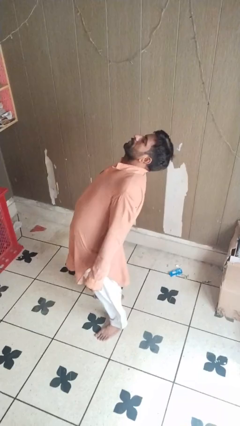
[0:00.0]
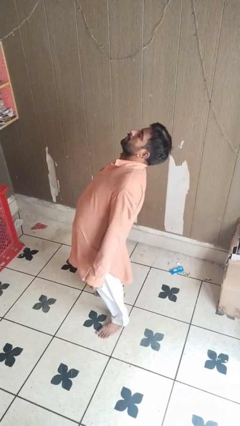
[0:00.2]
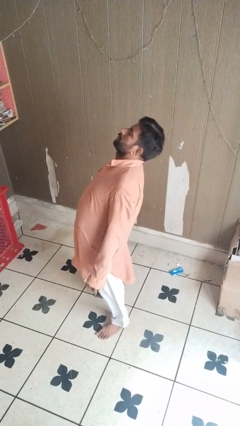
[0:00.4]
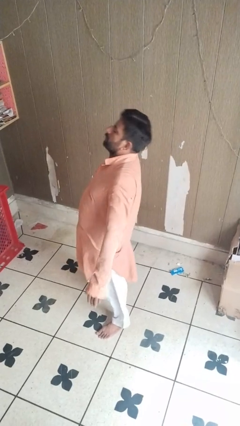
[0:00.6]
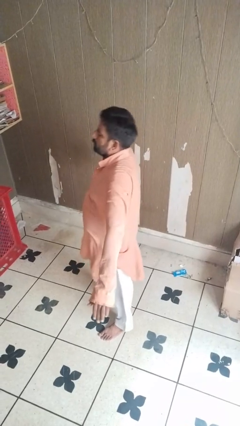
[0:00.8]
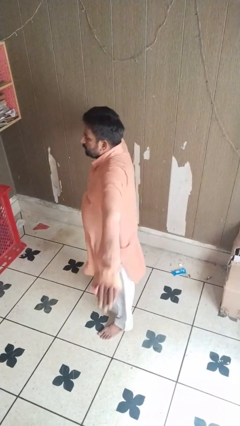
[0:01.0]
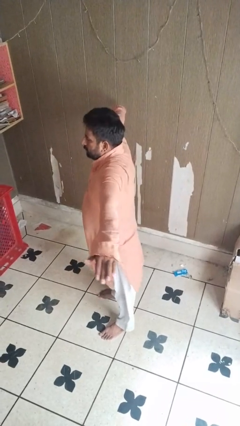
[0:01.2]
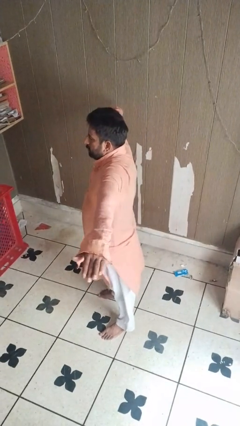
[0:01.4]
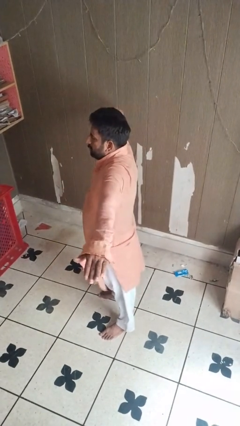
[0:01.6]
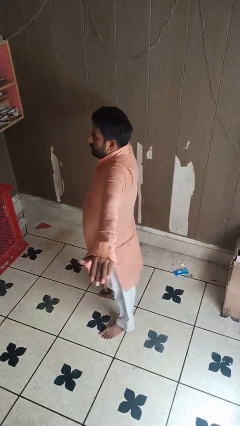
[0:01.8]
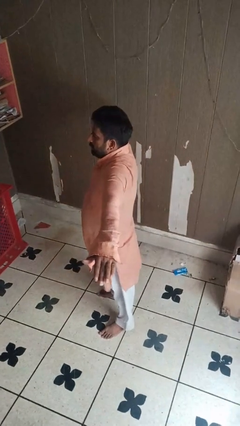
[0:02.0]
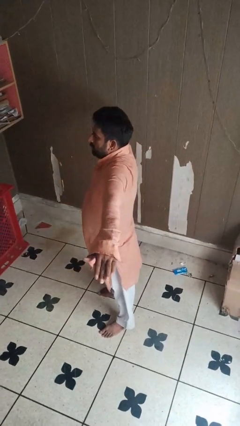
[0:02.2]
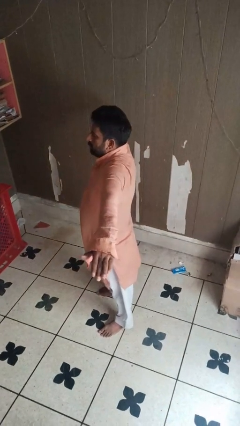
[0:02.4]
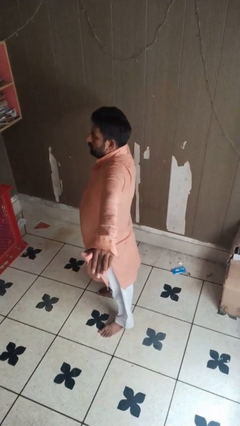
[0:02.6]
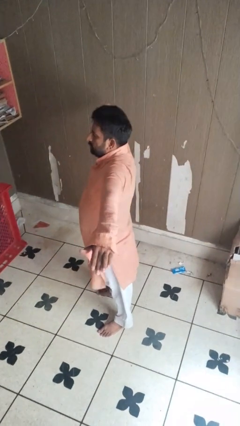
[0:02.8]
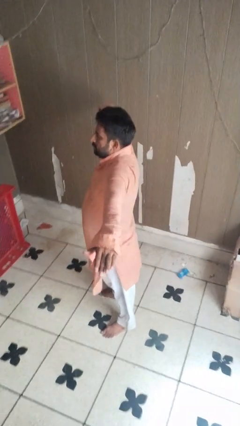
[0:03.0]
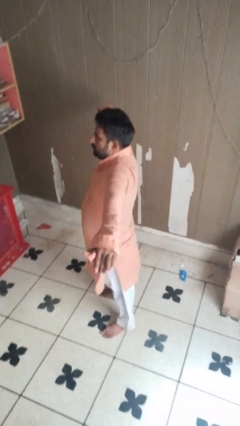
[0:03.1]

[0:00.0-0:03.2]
person stretches arms to side

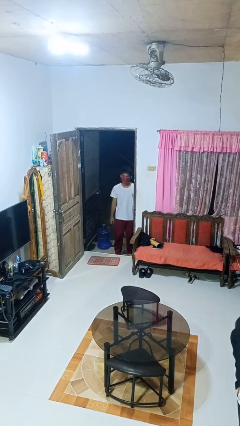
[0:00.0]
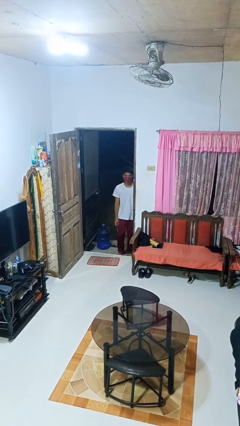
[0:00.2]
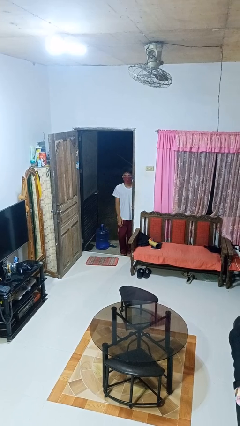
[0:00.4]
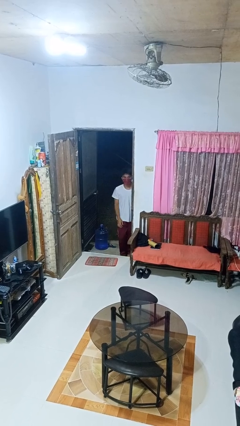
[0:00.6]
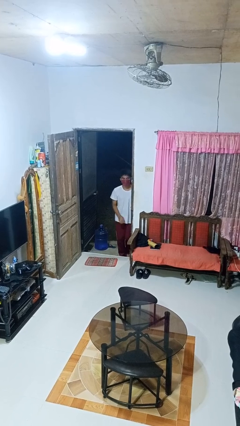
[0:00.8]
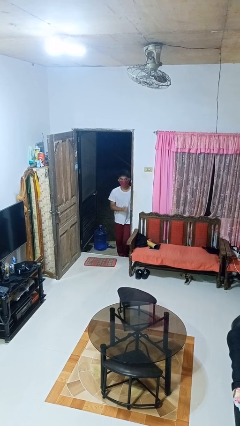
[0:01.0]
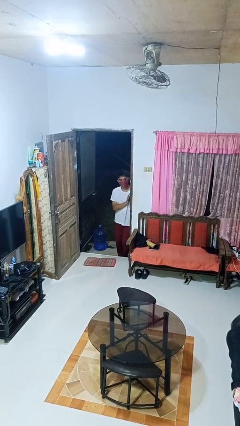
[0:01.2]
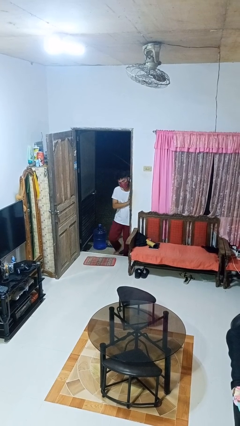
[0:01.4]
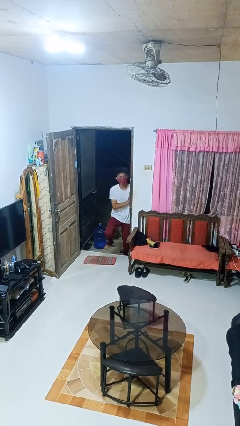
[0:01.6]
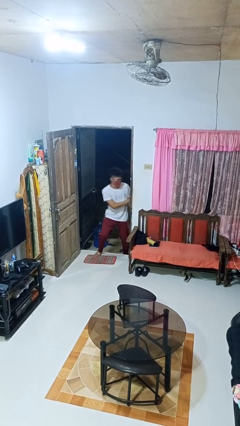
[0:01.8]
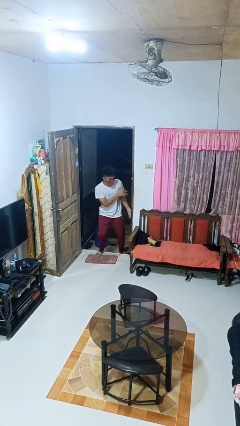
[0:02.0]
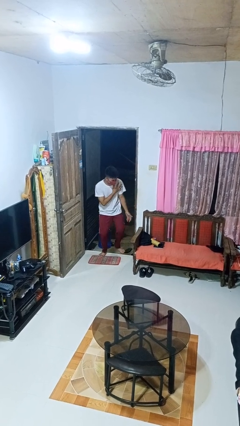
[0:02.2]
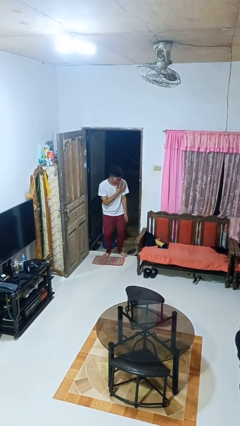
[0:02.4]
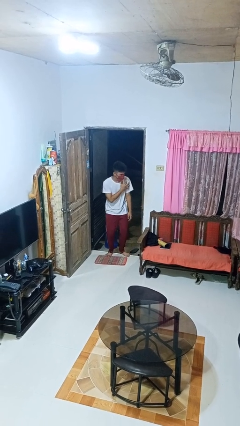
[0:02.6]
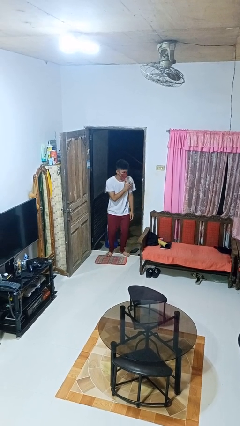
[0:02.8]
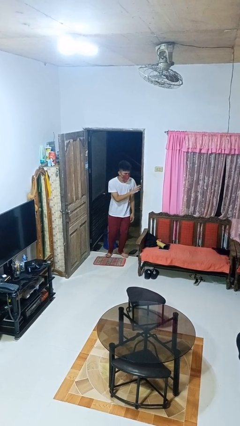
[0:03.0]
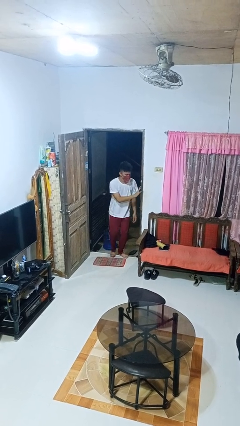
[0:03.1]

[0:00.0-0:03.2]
person bumps into wall

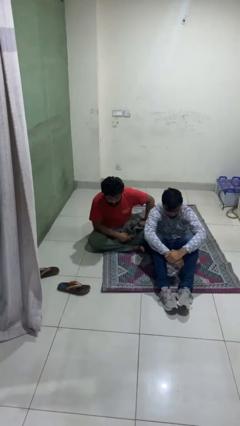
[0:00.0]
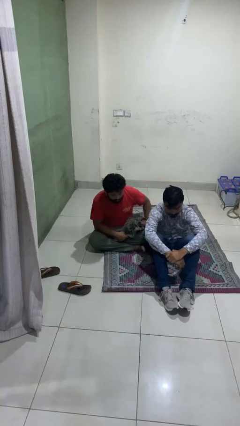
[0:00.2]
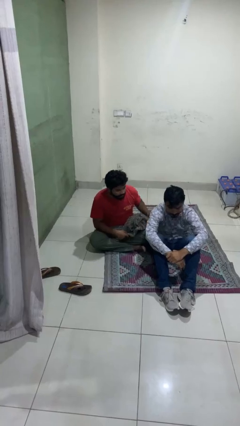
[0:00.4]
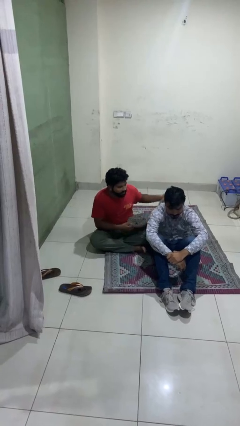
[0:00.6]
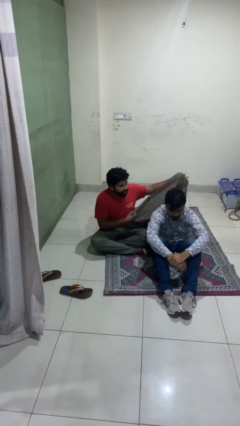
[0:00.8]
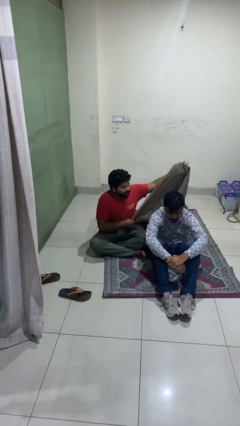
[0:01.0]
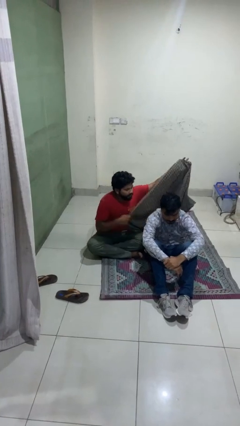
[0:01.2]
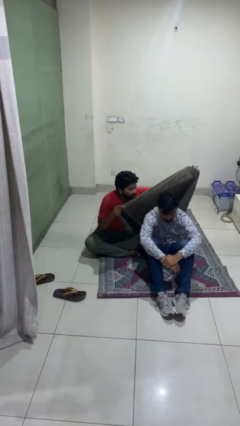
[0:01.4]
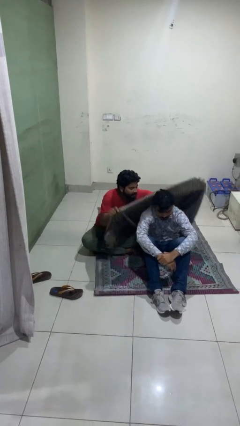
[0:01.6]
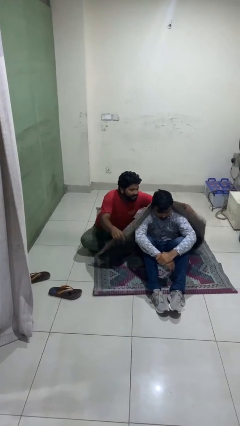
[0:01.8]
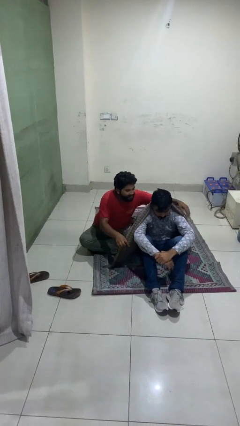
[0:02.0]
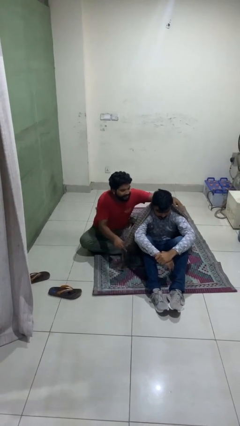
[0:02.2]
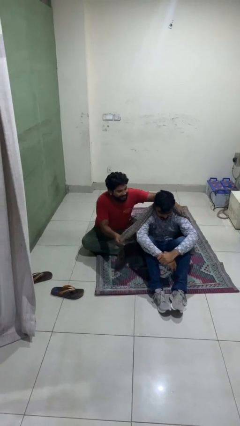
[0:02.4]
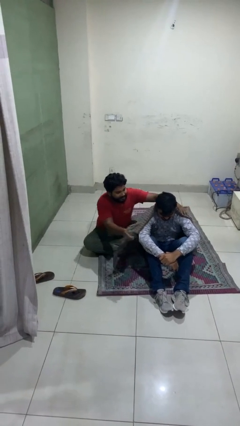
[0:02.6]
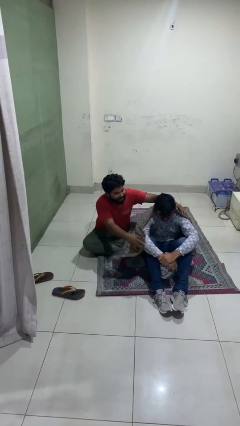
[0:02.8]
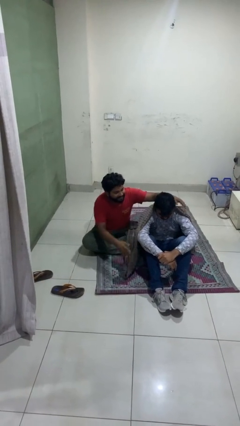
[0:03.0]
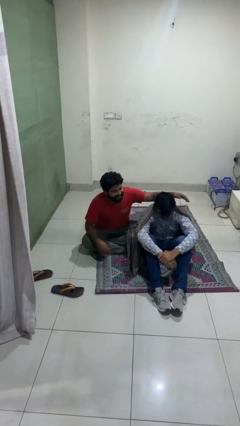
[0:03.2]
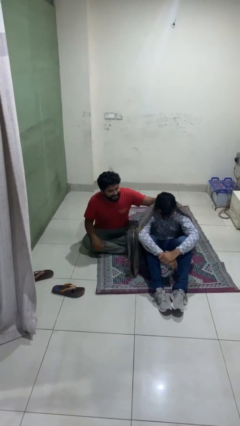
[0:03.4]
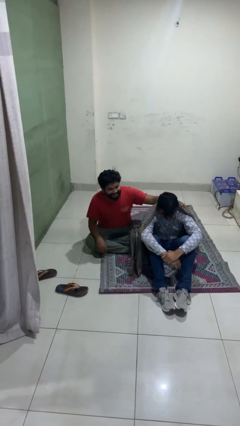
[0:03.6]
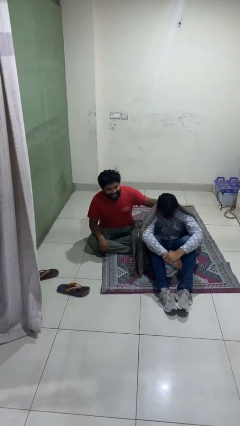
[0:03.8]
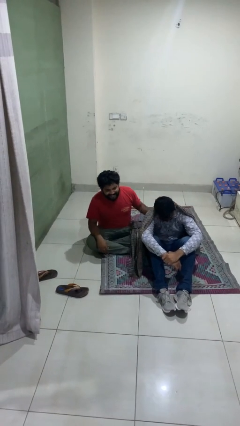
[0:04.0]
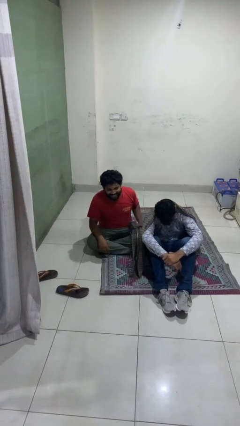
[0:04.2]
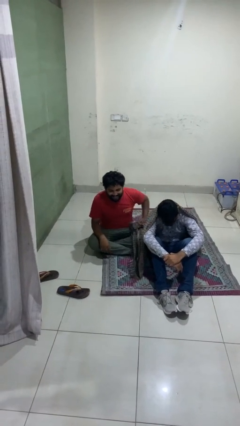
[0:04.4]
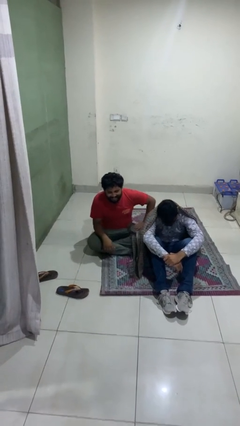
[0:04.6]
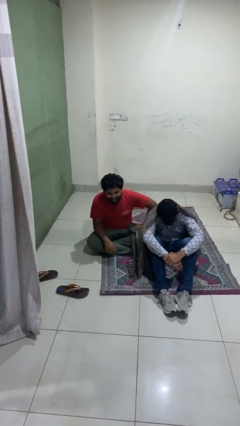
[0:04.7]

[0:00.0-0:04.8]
person covers friend with blanket

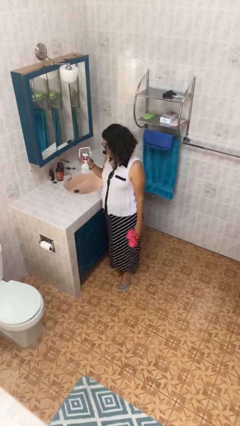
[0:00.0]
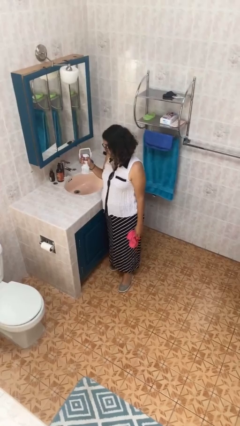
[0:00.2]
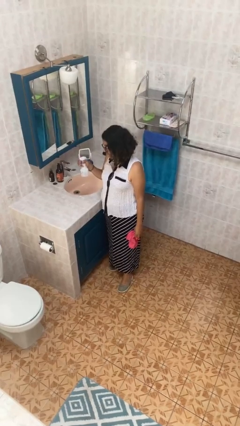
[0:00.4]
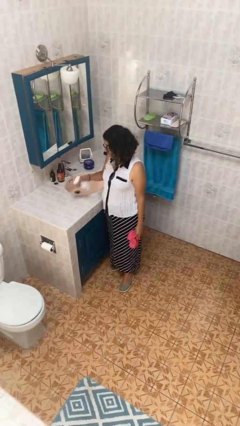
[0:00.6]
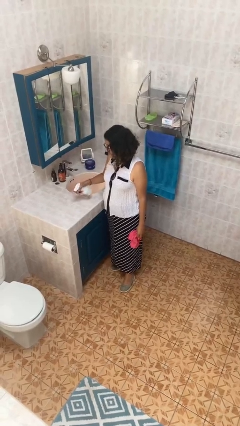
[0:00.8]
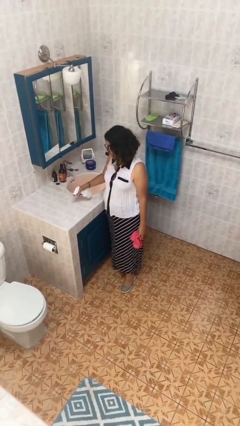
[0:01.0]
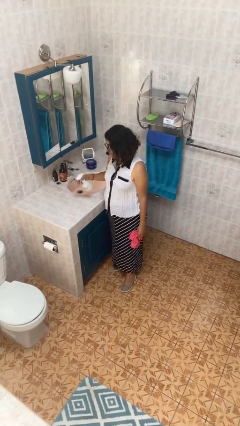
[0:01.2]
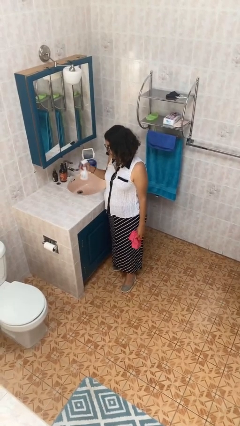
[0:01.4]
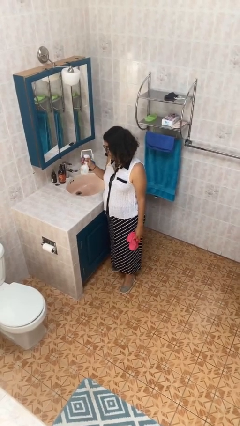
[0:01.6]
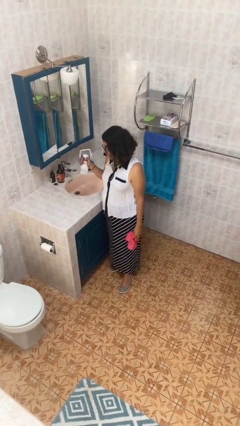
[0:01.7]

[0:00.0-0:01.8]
person sprays from bottle

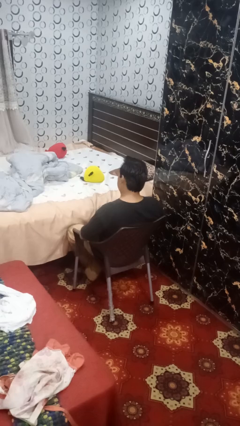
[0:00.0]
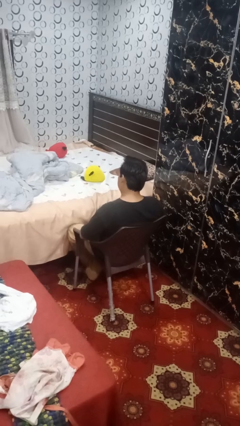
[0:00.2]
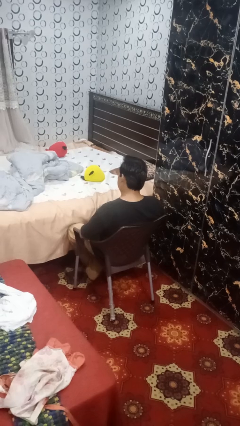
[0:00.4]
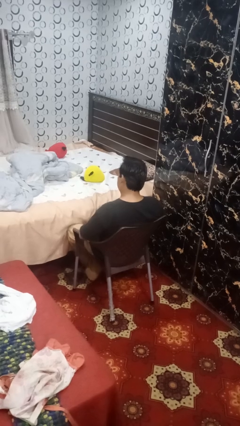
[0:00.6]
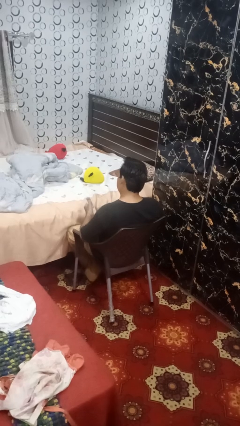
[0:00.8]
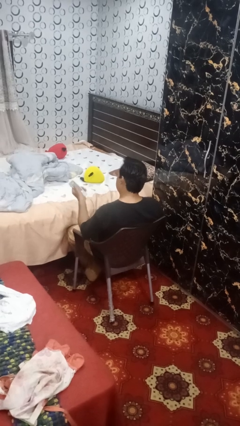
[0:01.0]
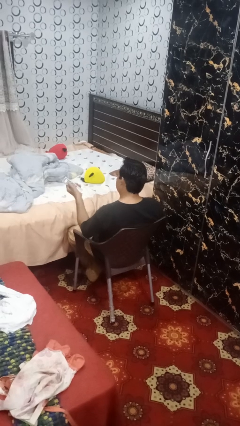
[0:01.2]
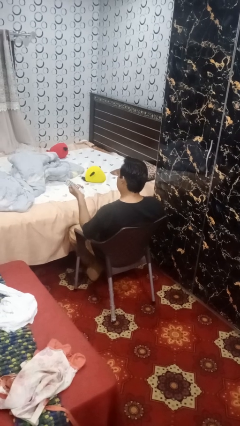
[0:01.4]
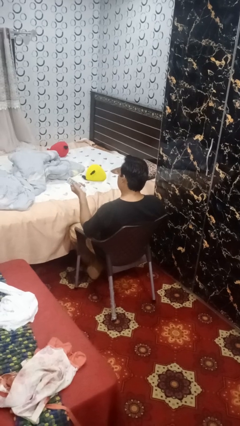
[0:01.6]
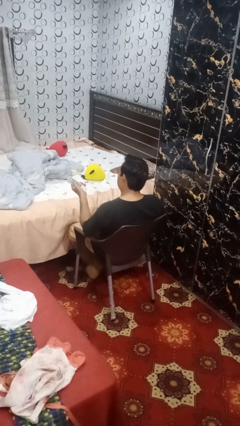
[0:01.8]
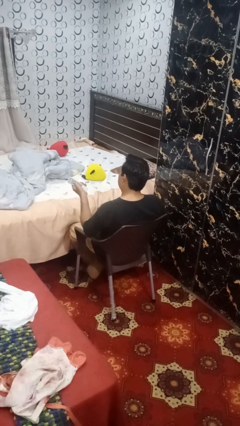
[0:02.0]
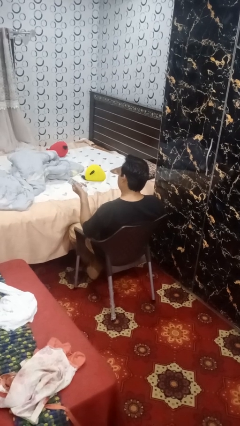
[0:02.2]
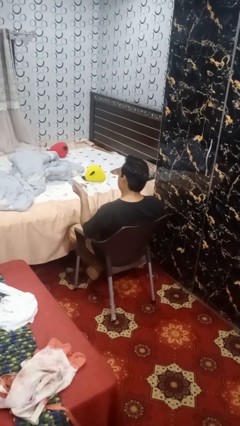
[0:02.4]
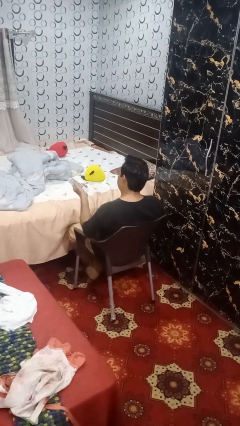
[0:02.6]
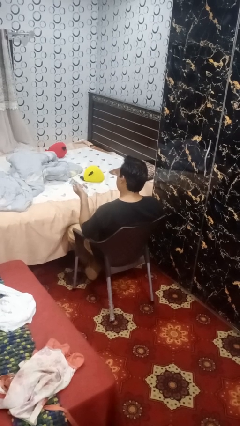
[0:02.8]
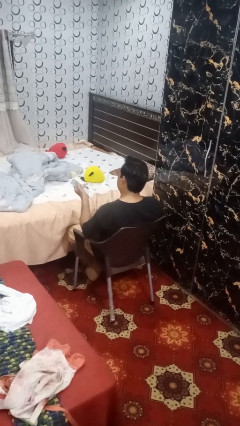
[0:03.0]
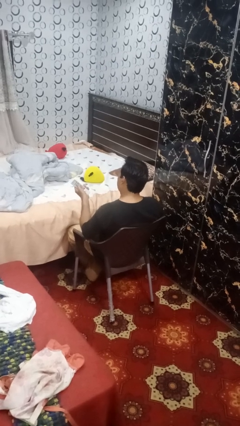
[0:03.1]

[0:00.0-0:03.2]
person uses television remote

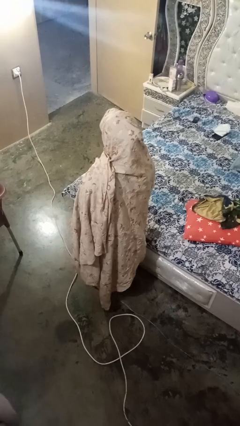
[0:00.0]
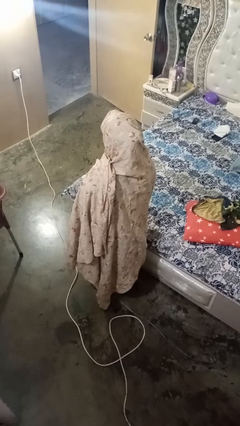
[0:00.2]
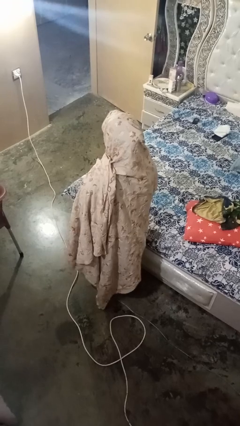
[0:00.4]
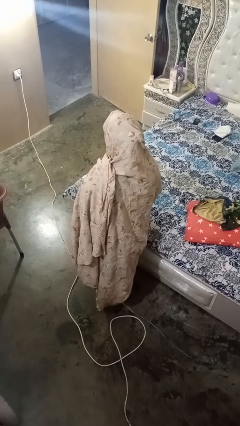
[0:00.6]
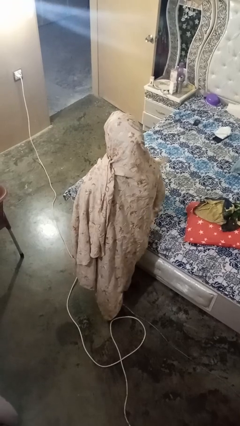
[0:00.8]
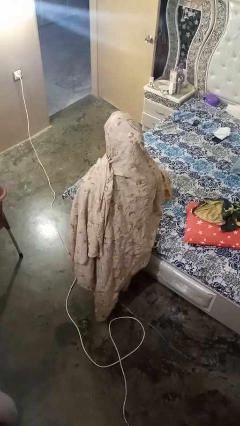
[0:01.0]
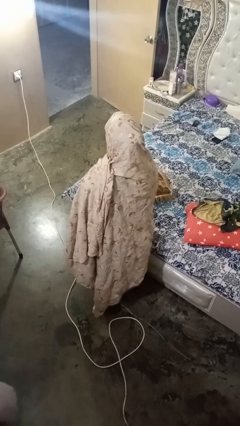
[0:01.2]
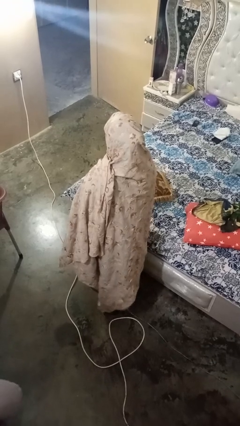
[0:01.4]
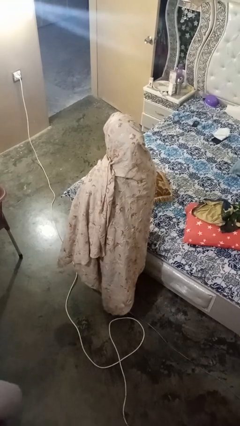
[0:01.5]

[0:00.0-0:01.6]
person puts down object on bed
